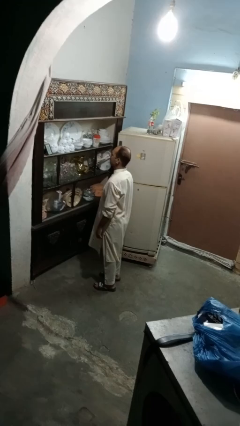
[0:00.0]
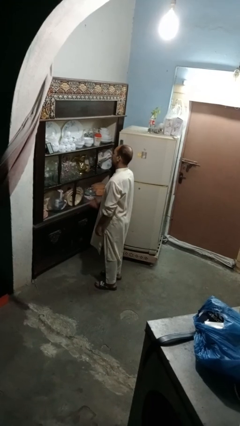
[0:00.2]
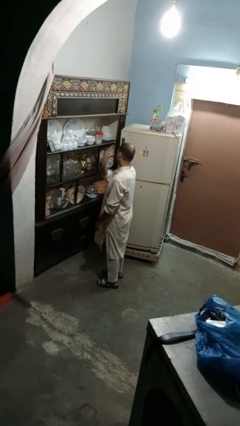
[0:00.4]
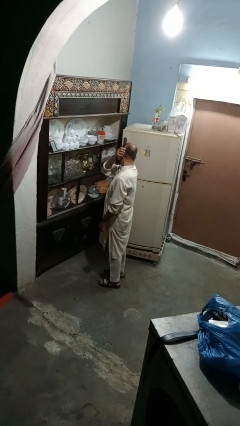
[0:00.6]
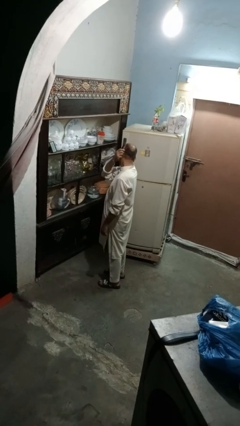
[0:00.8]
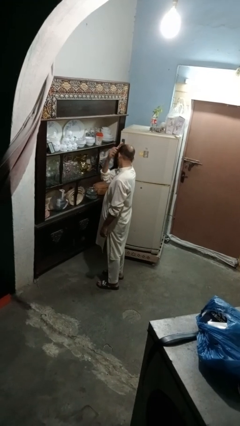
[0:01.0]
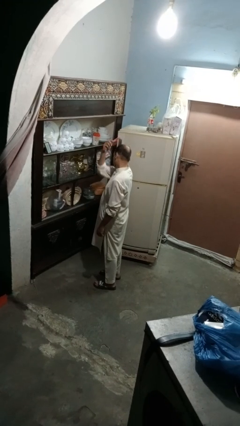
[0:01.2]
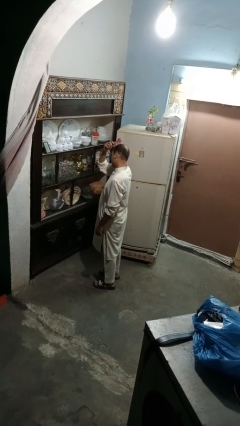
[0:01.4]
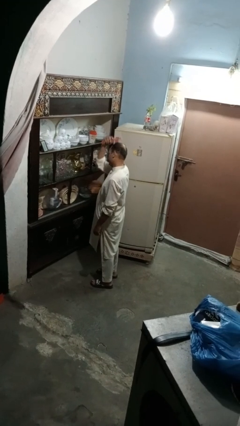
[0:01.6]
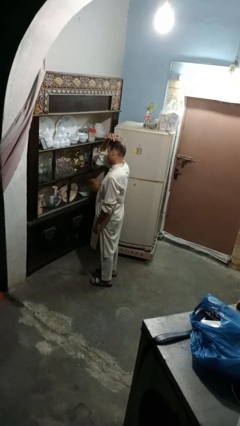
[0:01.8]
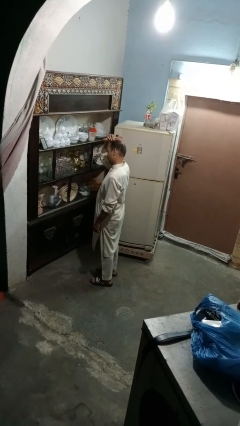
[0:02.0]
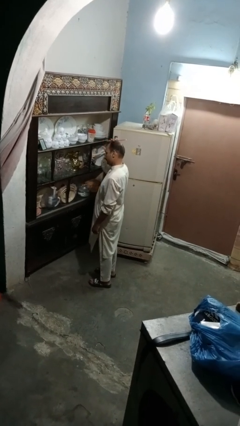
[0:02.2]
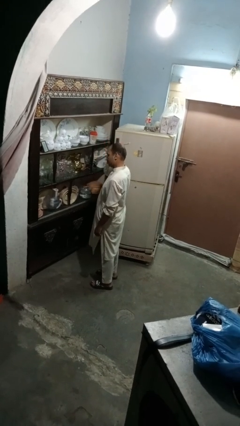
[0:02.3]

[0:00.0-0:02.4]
person brushes hair

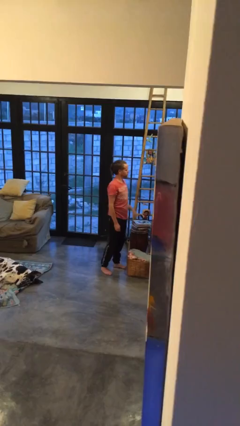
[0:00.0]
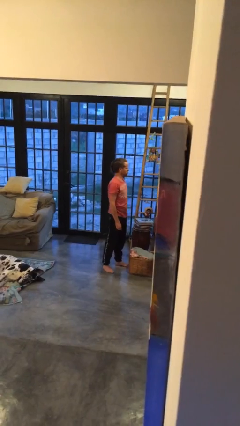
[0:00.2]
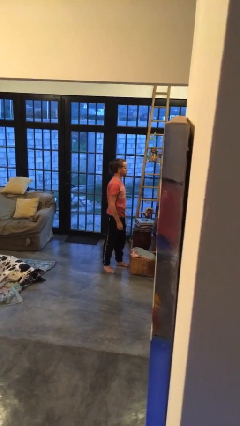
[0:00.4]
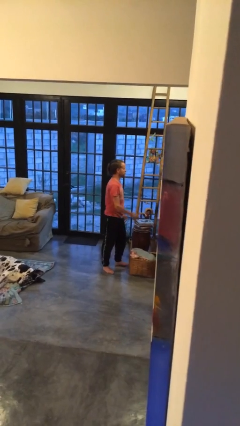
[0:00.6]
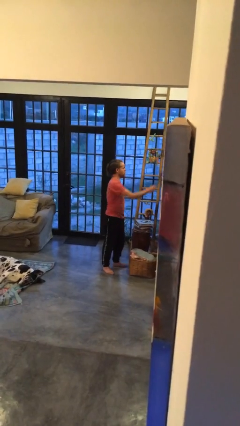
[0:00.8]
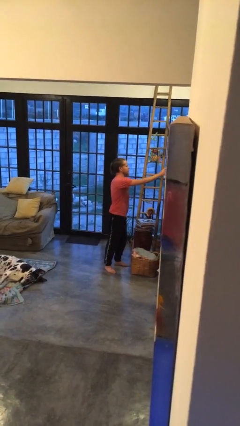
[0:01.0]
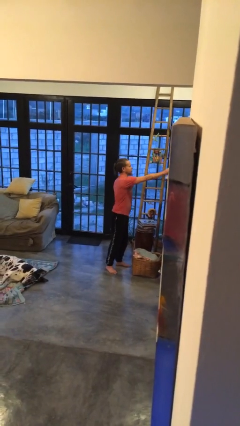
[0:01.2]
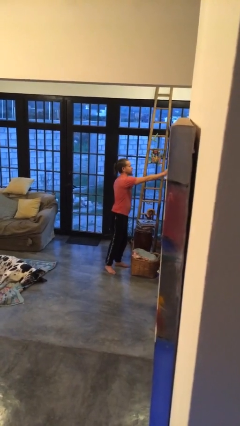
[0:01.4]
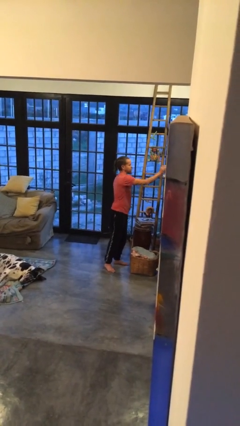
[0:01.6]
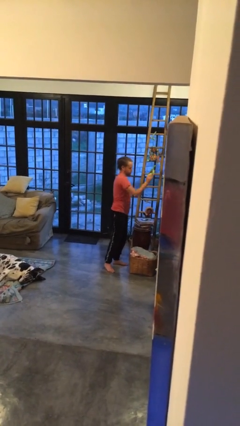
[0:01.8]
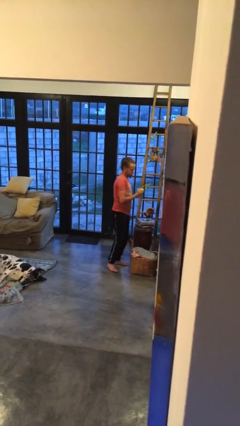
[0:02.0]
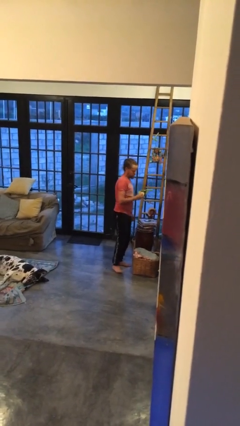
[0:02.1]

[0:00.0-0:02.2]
person picks up object from countertop

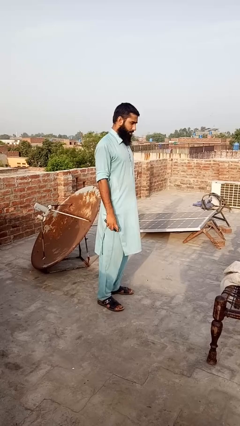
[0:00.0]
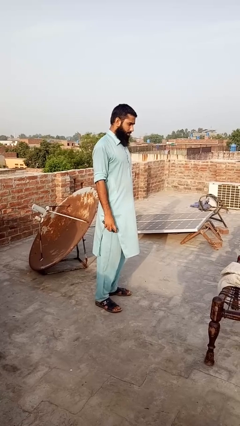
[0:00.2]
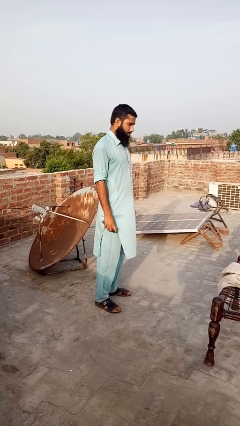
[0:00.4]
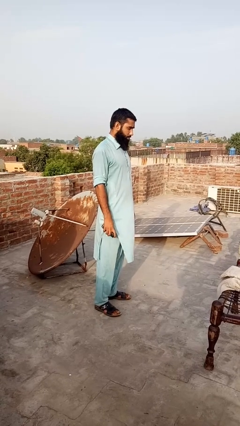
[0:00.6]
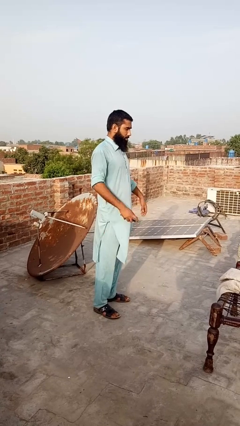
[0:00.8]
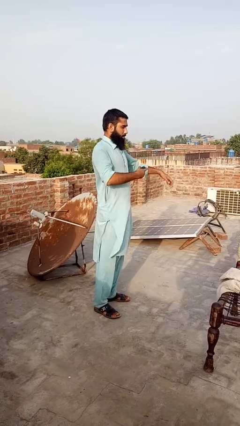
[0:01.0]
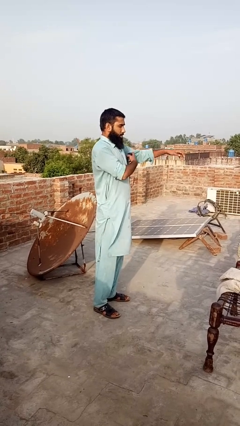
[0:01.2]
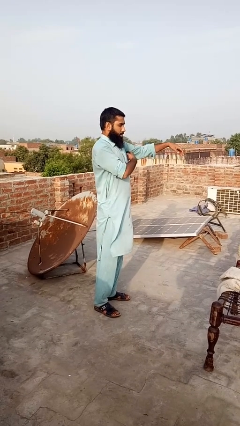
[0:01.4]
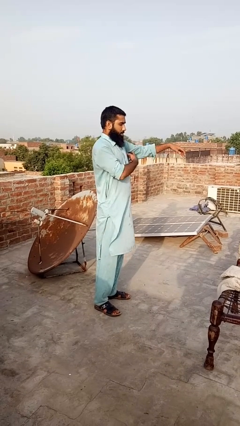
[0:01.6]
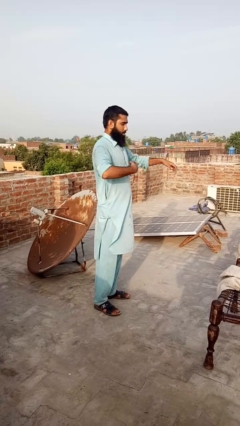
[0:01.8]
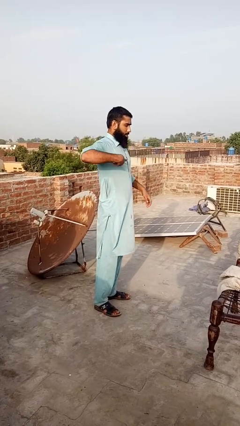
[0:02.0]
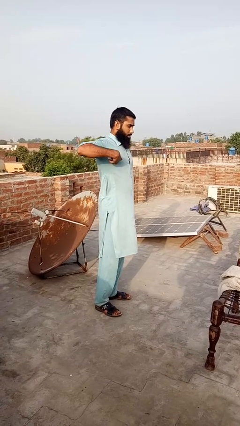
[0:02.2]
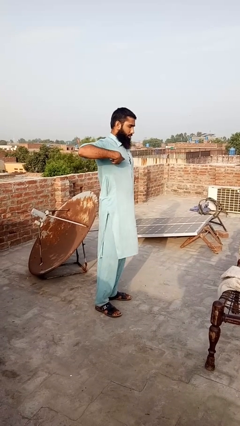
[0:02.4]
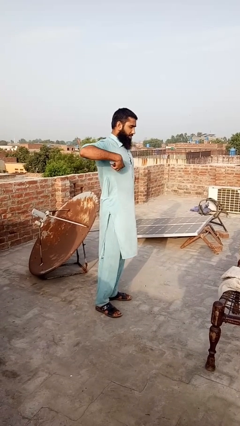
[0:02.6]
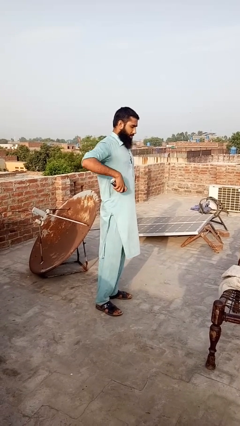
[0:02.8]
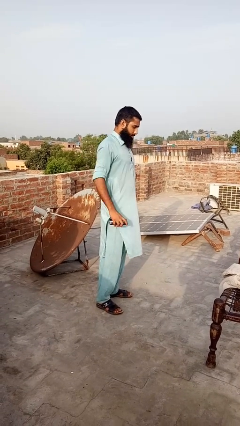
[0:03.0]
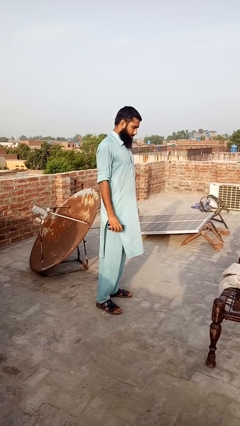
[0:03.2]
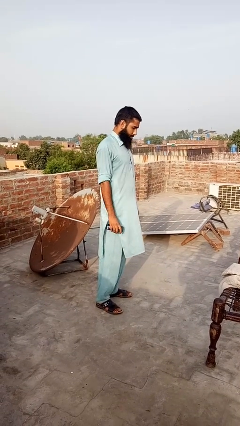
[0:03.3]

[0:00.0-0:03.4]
person applies deodorant

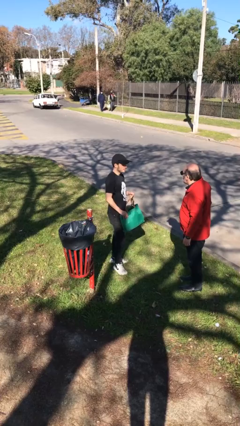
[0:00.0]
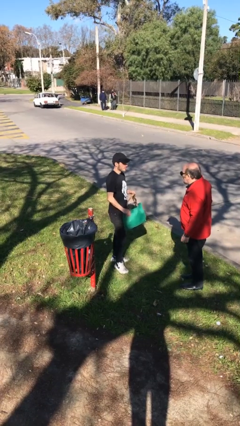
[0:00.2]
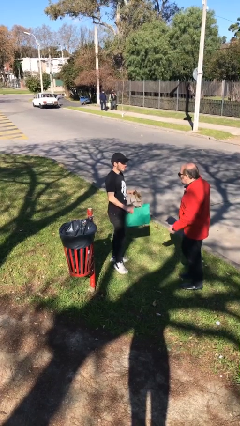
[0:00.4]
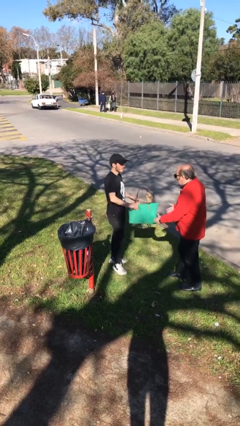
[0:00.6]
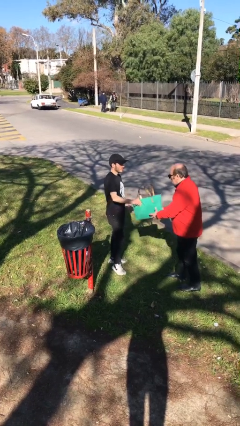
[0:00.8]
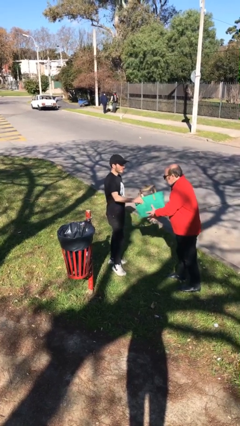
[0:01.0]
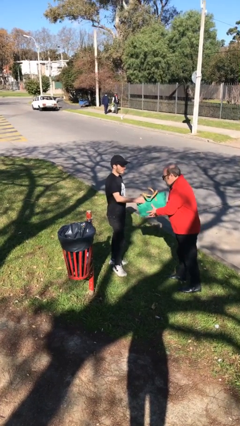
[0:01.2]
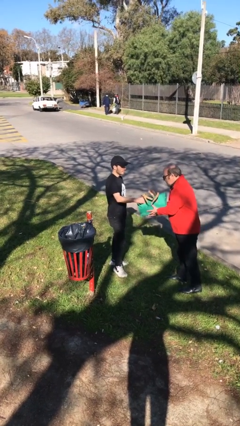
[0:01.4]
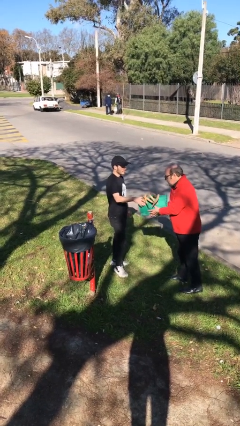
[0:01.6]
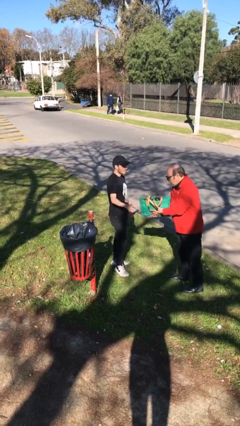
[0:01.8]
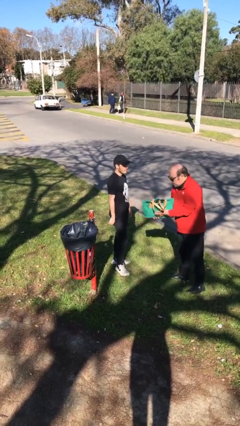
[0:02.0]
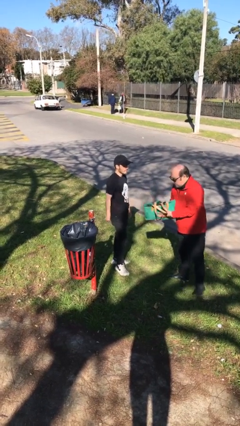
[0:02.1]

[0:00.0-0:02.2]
person transfers object to person

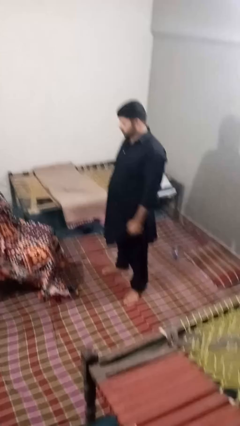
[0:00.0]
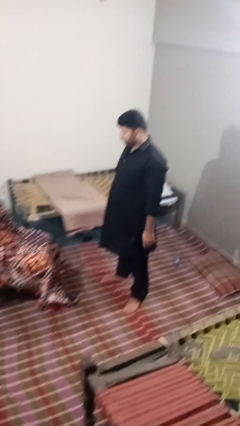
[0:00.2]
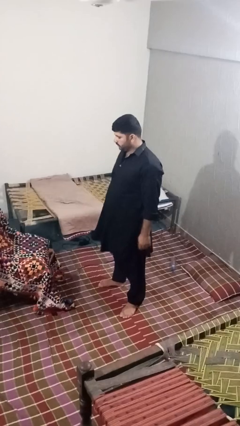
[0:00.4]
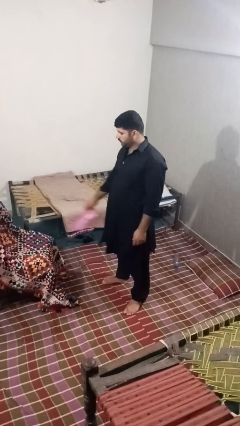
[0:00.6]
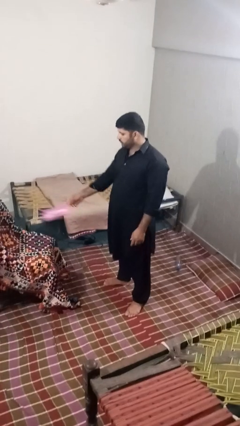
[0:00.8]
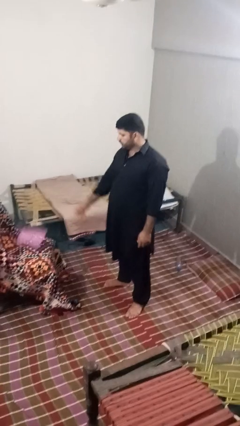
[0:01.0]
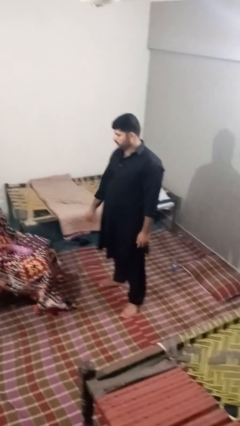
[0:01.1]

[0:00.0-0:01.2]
person puts down object on couch

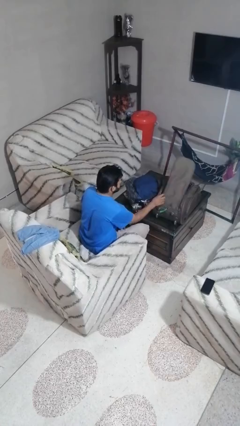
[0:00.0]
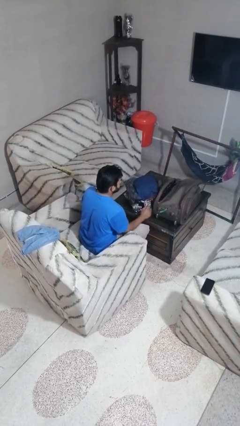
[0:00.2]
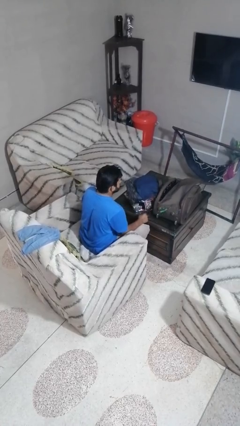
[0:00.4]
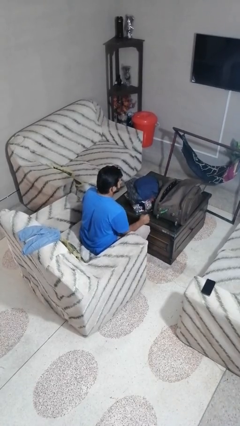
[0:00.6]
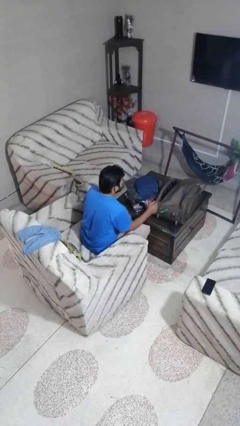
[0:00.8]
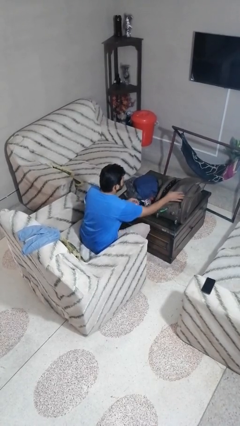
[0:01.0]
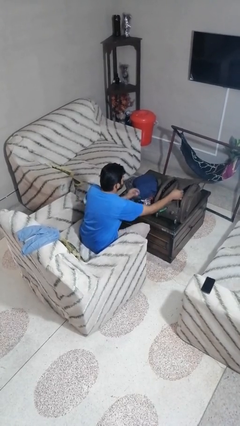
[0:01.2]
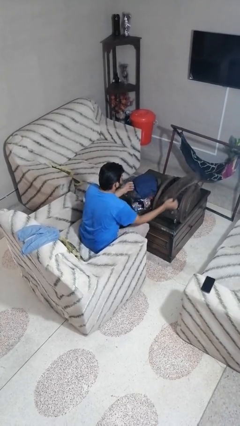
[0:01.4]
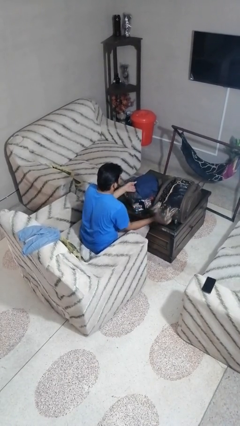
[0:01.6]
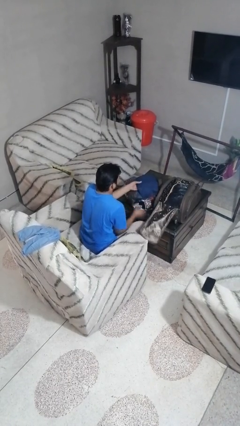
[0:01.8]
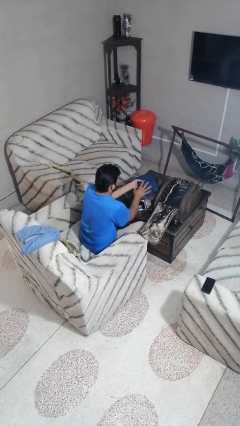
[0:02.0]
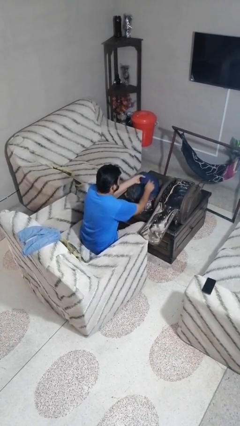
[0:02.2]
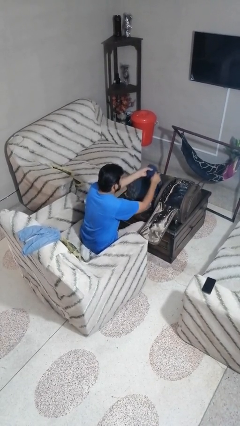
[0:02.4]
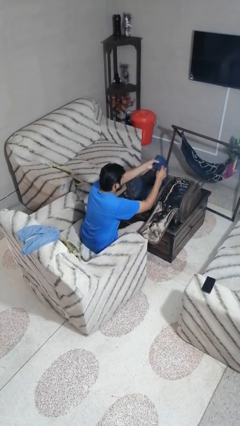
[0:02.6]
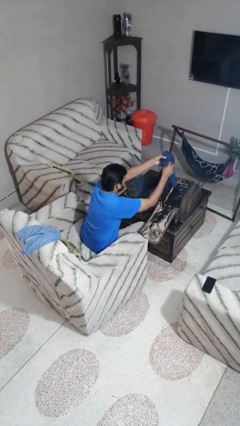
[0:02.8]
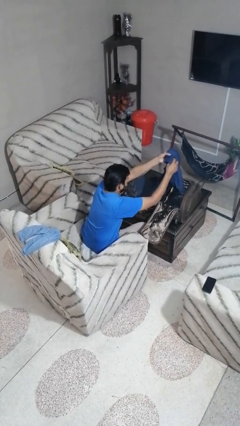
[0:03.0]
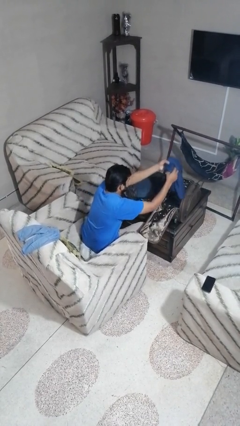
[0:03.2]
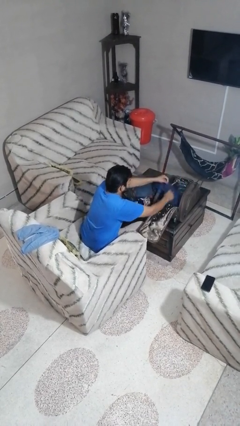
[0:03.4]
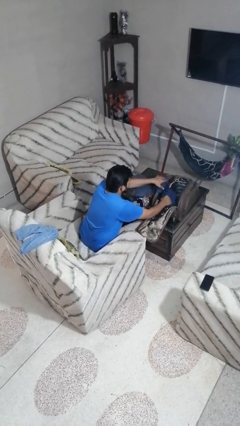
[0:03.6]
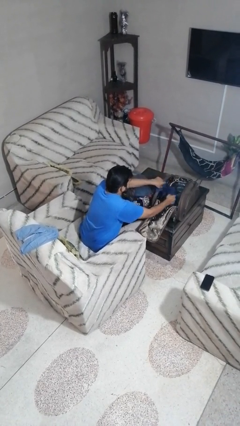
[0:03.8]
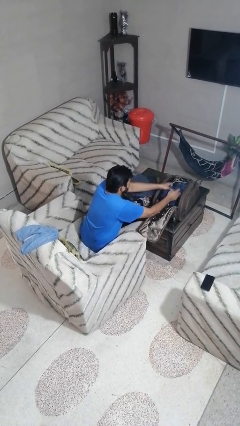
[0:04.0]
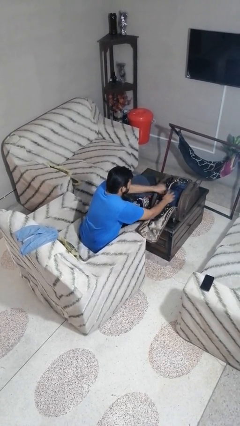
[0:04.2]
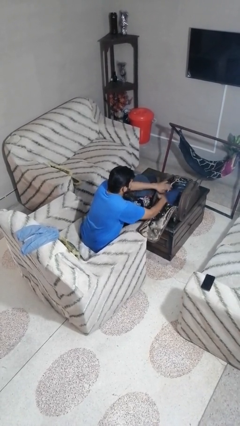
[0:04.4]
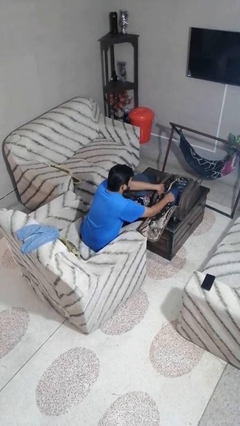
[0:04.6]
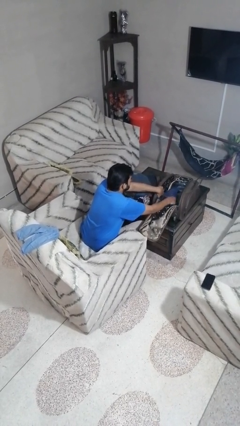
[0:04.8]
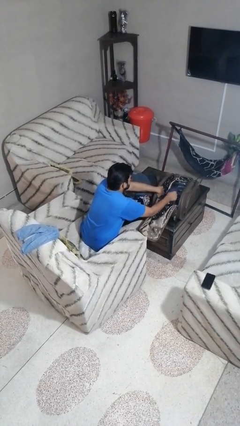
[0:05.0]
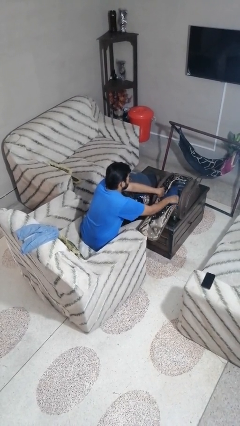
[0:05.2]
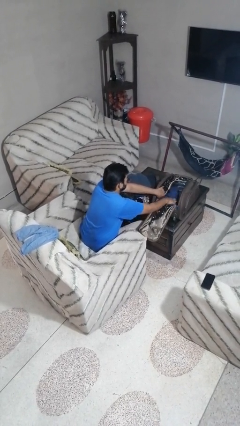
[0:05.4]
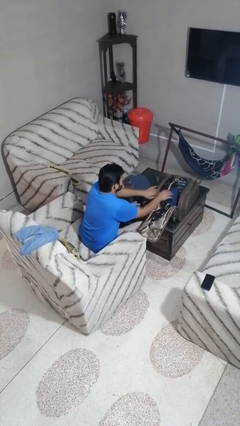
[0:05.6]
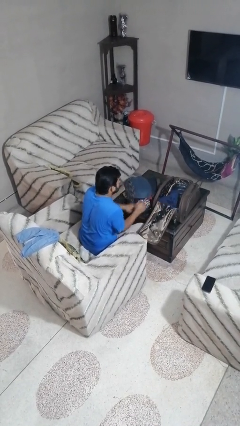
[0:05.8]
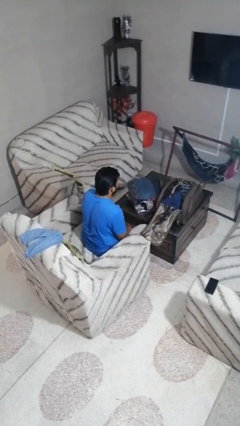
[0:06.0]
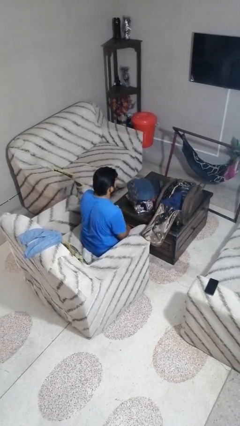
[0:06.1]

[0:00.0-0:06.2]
person loads clothes into suitcase
